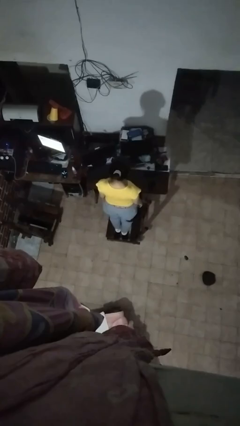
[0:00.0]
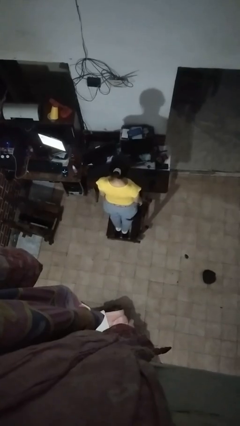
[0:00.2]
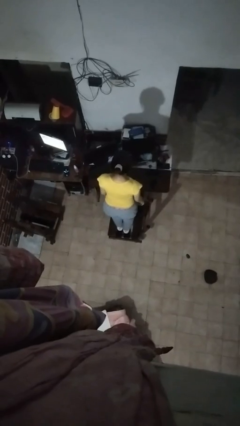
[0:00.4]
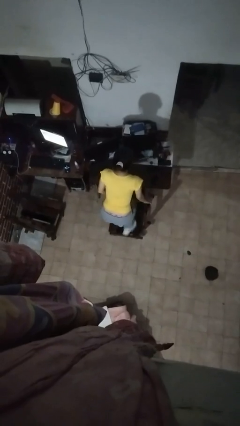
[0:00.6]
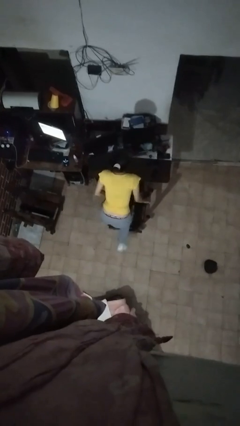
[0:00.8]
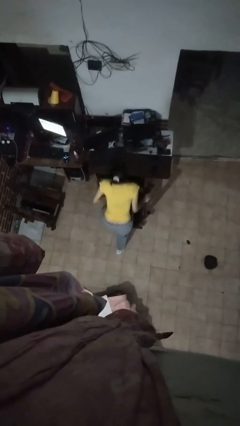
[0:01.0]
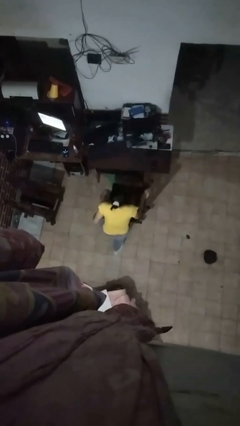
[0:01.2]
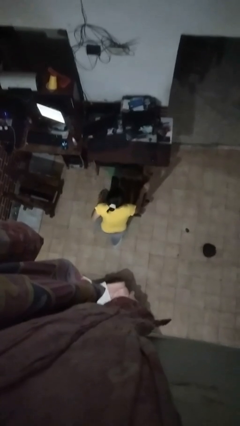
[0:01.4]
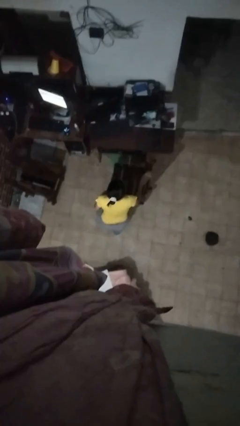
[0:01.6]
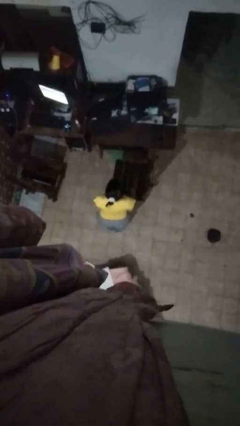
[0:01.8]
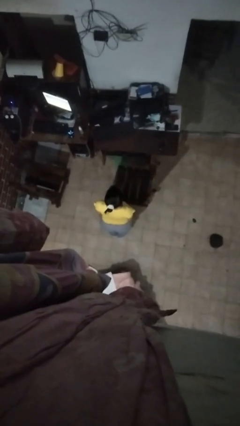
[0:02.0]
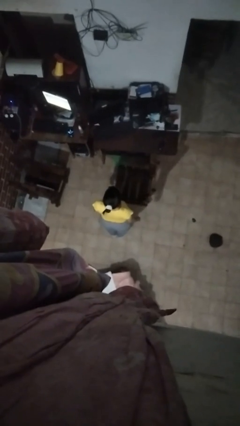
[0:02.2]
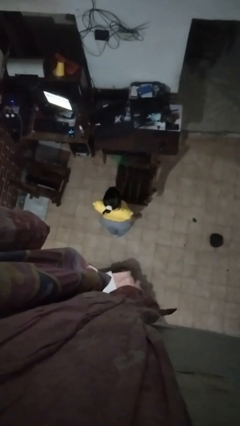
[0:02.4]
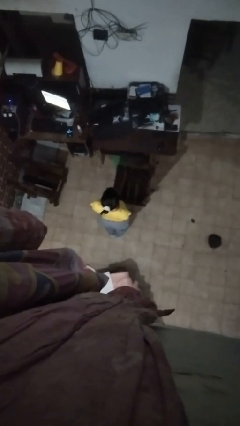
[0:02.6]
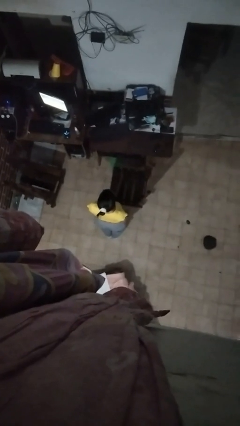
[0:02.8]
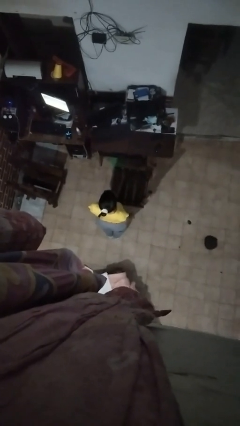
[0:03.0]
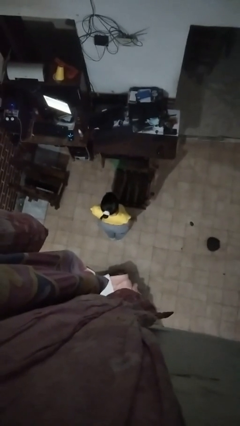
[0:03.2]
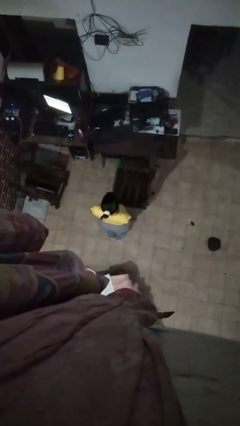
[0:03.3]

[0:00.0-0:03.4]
person climbs off chair

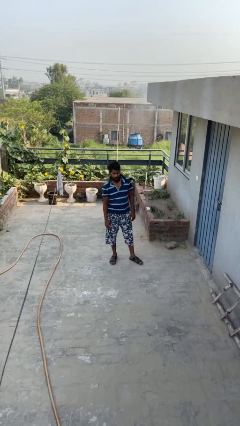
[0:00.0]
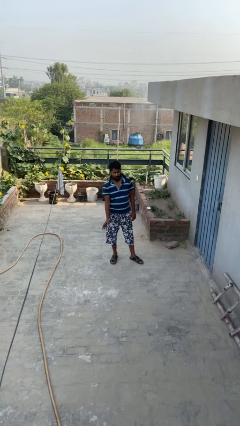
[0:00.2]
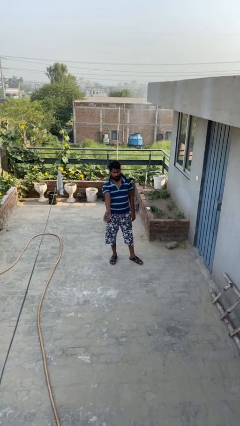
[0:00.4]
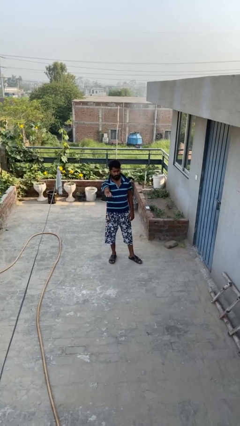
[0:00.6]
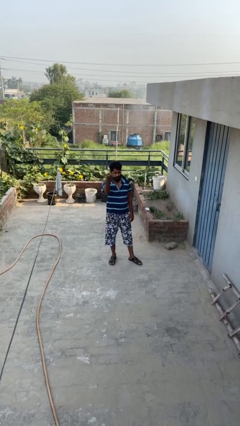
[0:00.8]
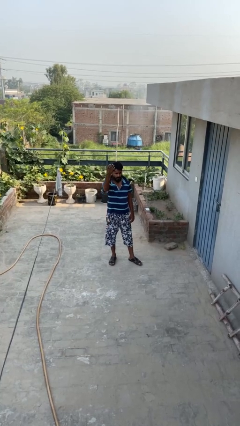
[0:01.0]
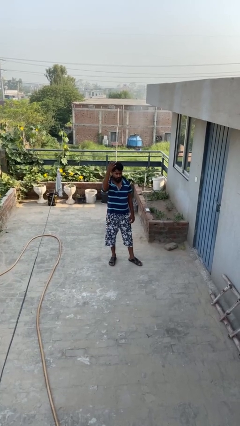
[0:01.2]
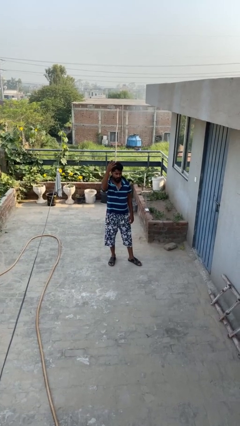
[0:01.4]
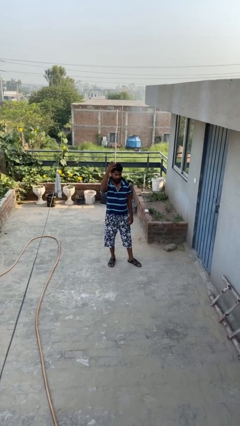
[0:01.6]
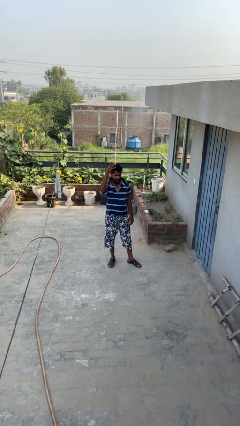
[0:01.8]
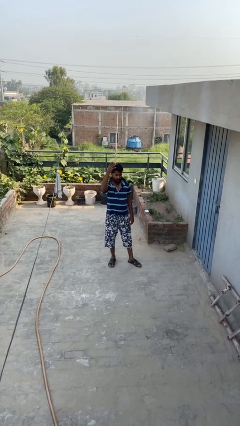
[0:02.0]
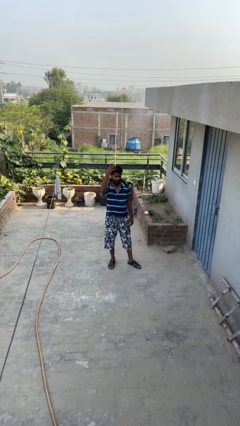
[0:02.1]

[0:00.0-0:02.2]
person gestures swipe up

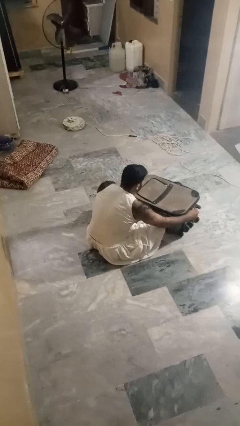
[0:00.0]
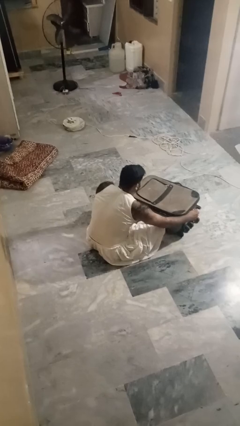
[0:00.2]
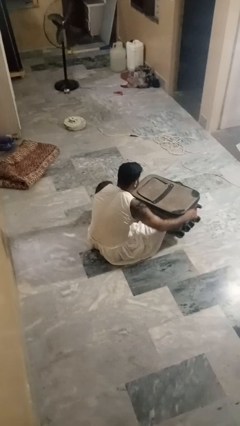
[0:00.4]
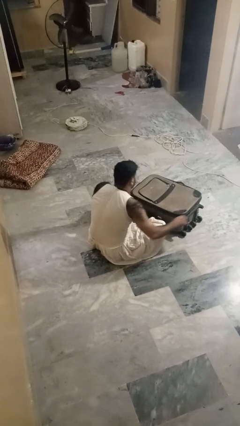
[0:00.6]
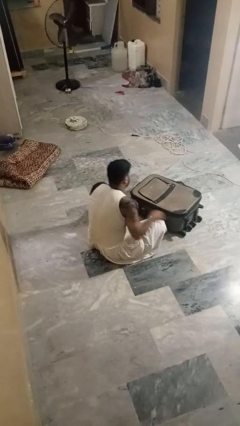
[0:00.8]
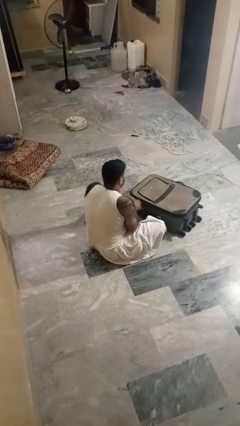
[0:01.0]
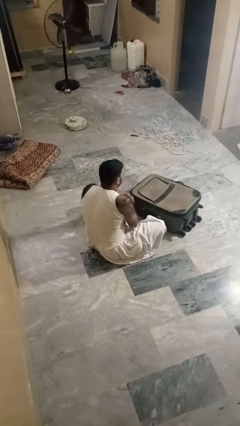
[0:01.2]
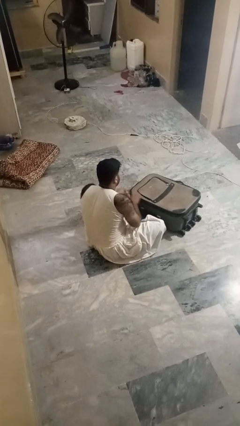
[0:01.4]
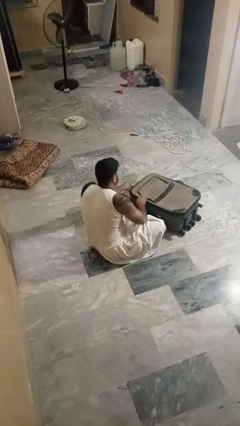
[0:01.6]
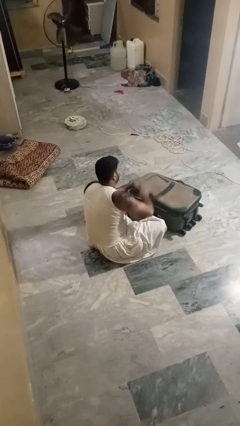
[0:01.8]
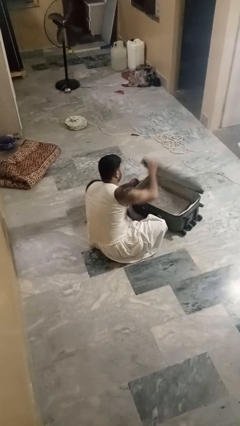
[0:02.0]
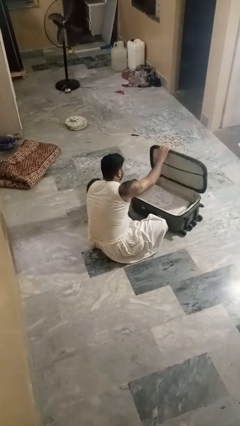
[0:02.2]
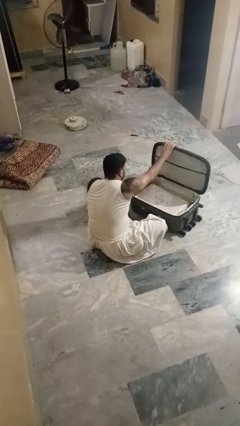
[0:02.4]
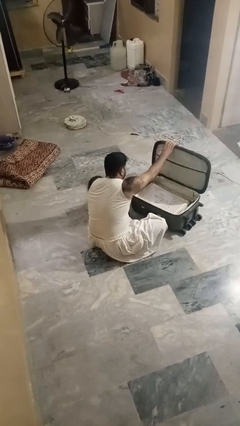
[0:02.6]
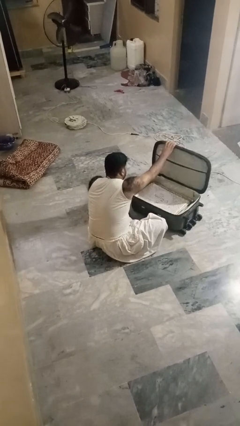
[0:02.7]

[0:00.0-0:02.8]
person opens suitcase

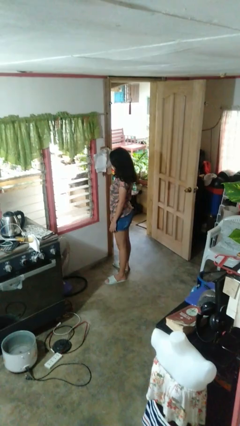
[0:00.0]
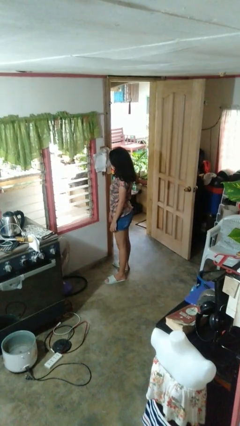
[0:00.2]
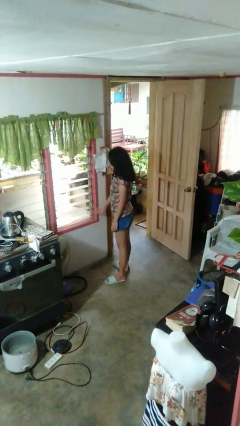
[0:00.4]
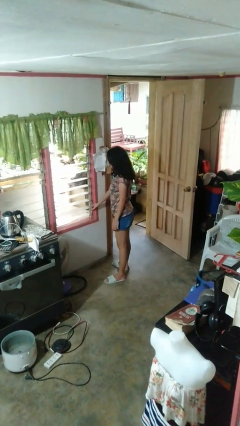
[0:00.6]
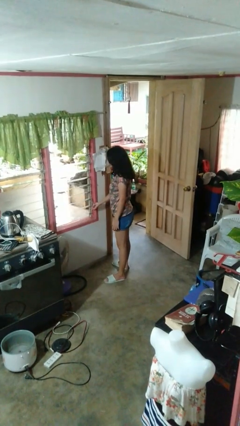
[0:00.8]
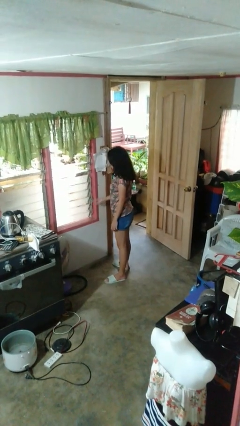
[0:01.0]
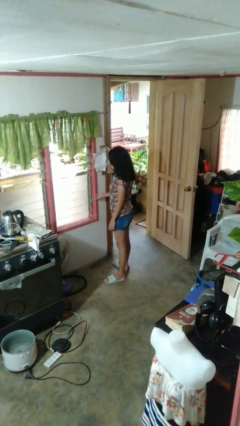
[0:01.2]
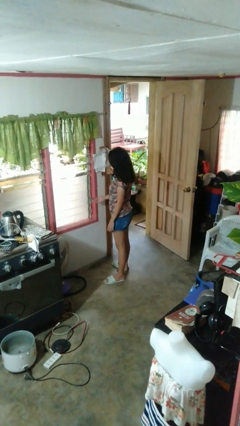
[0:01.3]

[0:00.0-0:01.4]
person closes home window

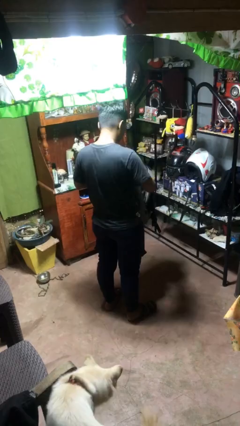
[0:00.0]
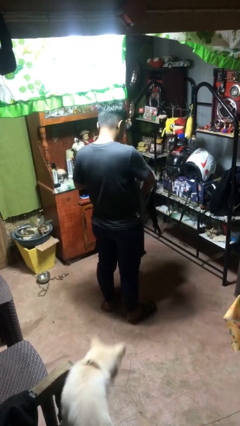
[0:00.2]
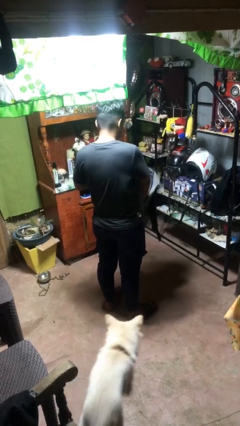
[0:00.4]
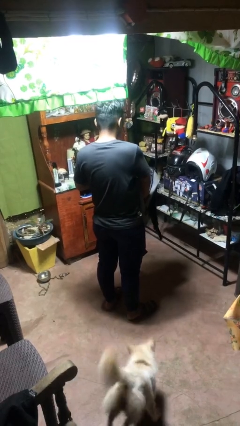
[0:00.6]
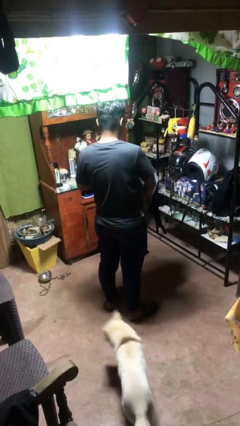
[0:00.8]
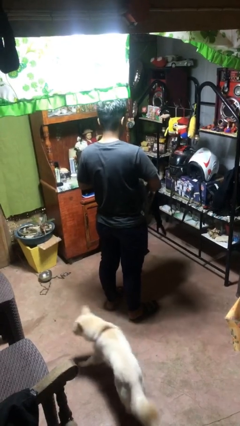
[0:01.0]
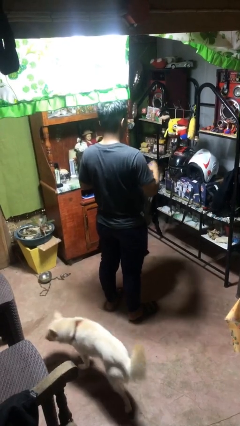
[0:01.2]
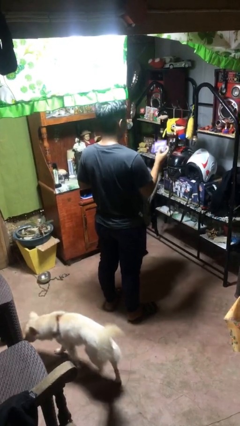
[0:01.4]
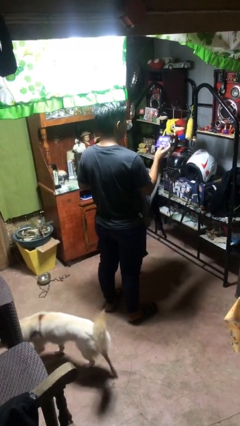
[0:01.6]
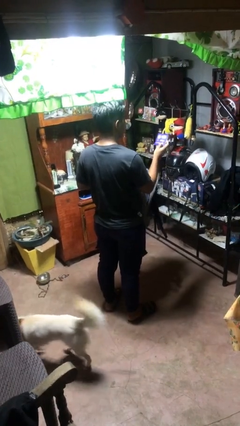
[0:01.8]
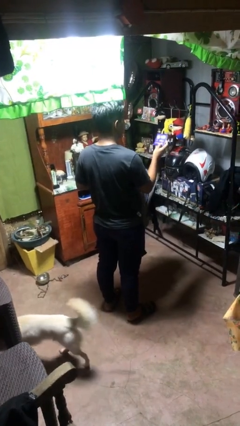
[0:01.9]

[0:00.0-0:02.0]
person takes object from bag

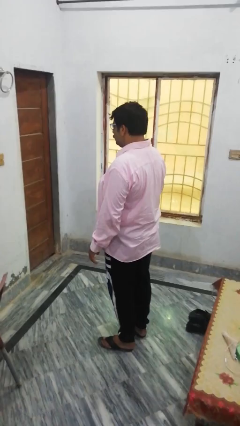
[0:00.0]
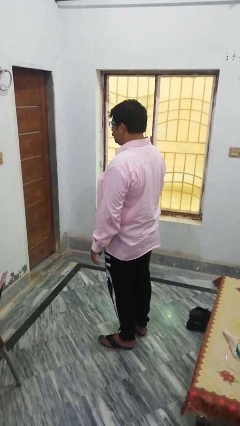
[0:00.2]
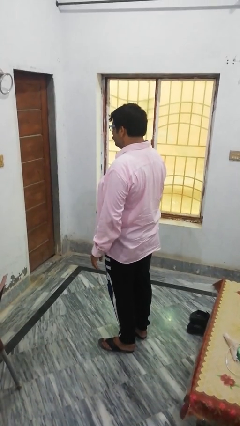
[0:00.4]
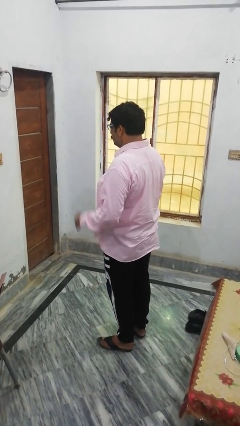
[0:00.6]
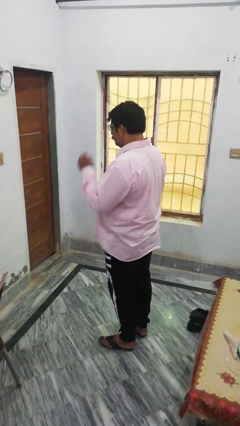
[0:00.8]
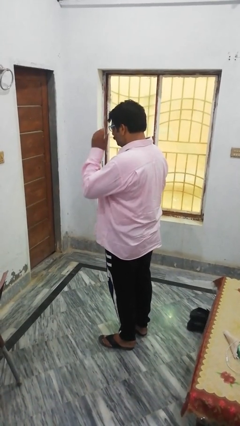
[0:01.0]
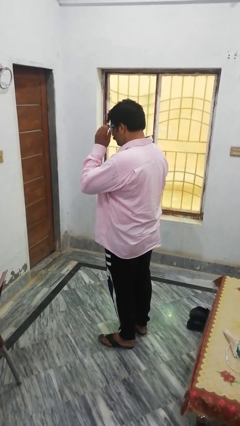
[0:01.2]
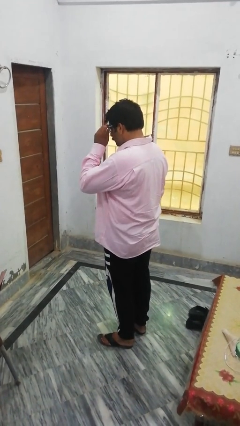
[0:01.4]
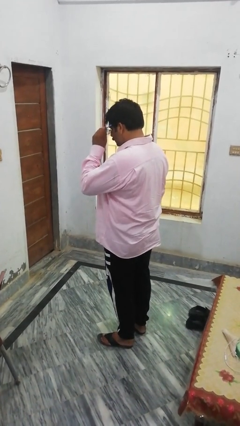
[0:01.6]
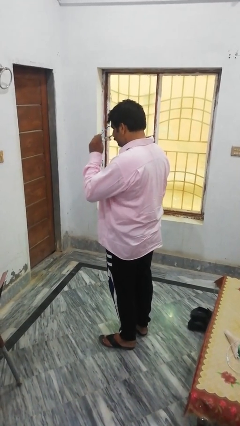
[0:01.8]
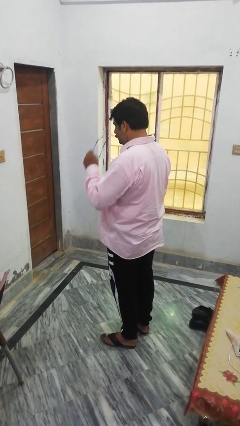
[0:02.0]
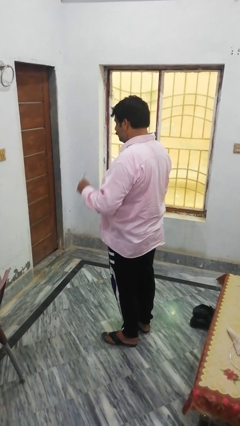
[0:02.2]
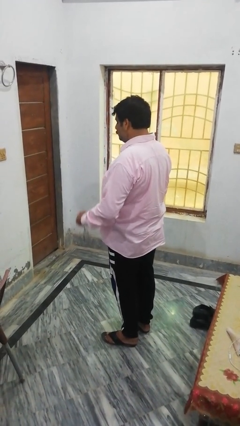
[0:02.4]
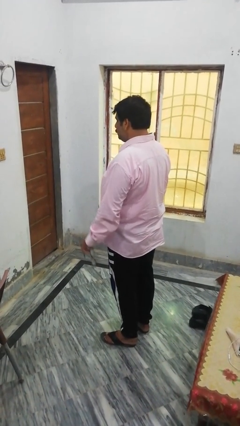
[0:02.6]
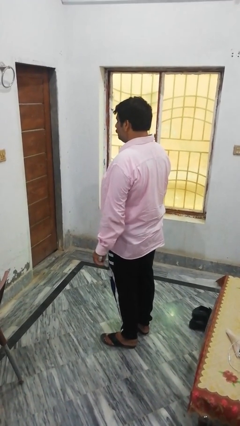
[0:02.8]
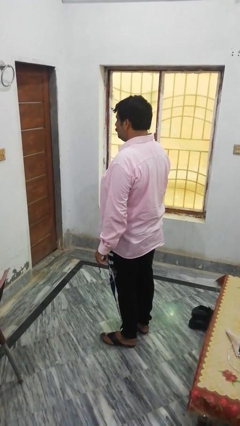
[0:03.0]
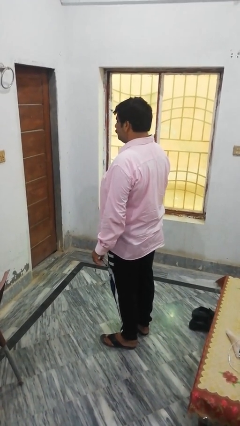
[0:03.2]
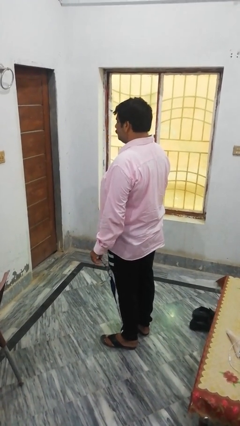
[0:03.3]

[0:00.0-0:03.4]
person takes off glasses

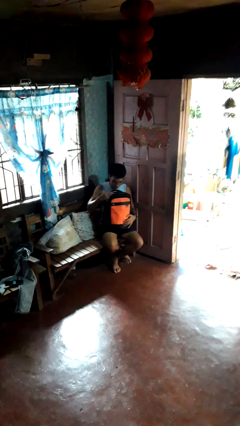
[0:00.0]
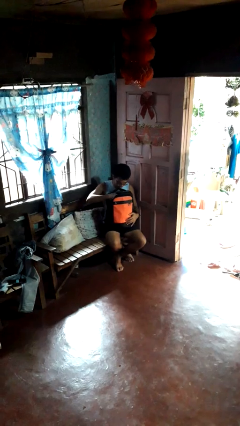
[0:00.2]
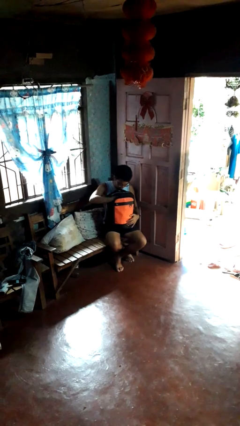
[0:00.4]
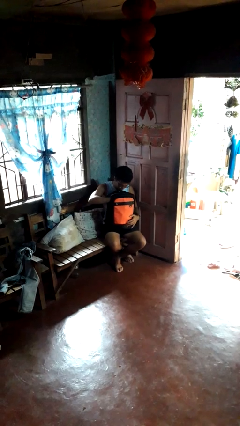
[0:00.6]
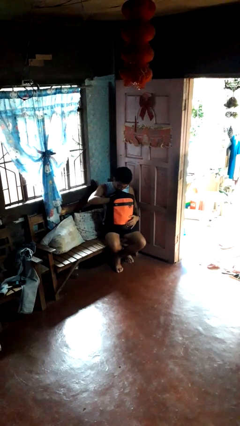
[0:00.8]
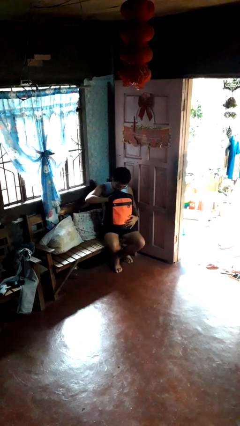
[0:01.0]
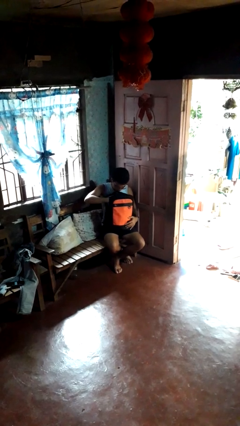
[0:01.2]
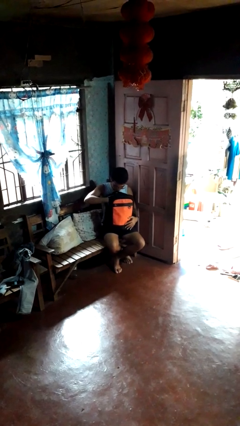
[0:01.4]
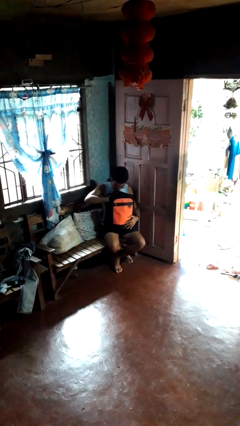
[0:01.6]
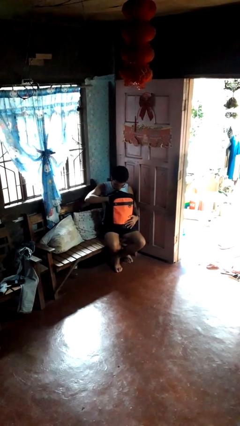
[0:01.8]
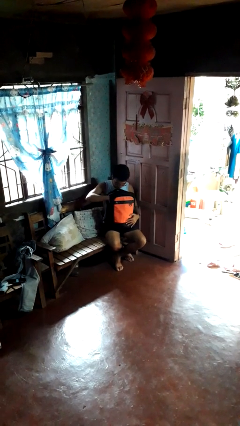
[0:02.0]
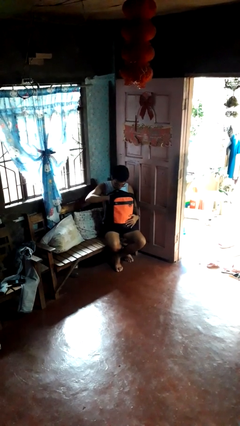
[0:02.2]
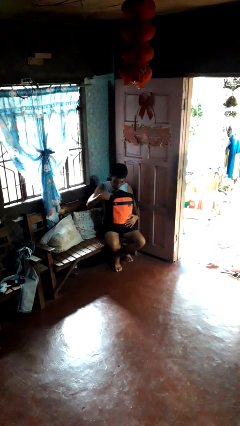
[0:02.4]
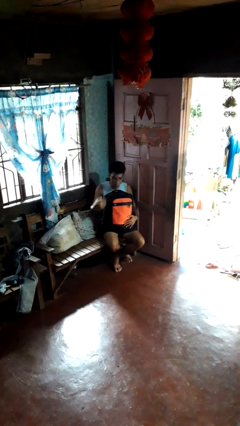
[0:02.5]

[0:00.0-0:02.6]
person searches in bag
